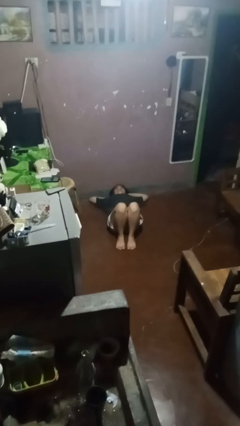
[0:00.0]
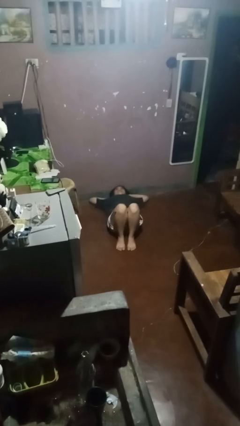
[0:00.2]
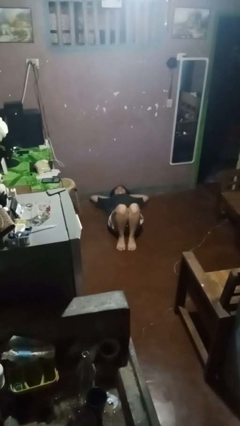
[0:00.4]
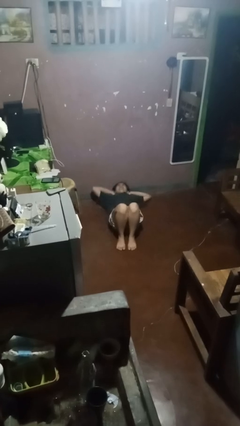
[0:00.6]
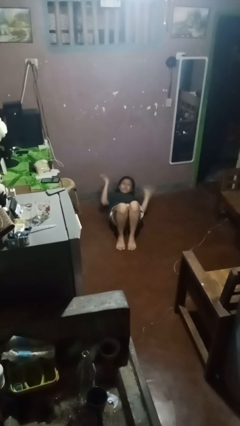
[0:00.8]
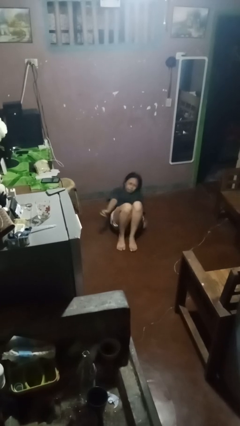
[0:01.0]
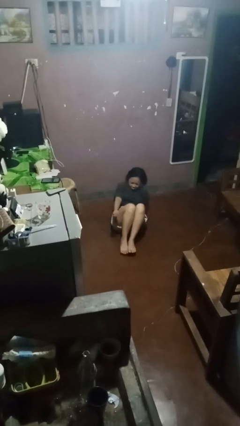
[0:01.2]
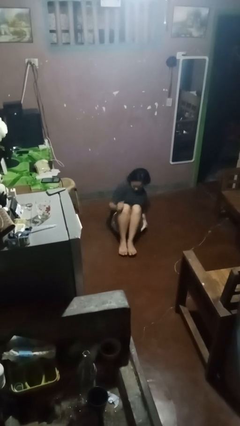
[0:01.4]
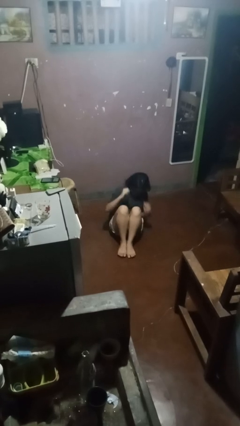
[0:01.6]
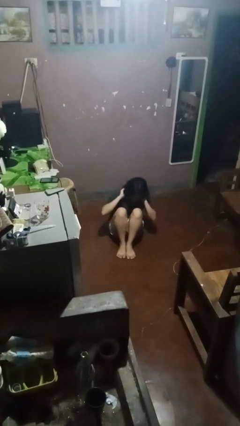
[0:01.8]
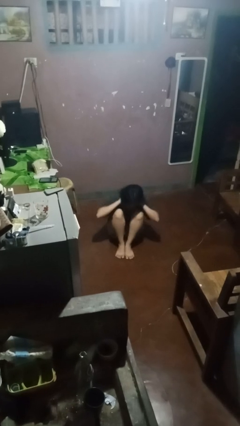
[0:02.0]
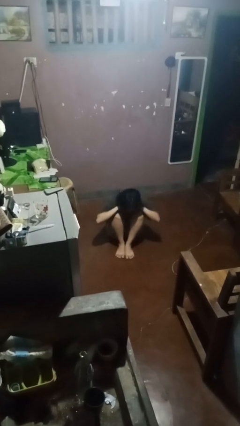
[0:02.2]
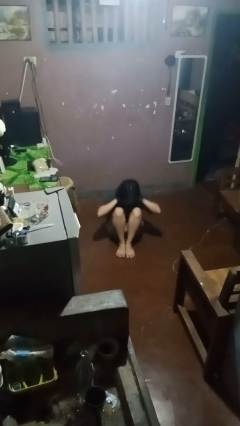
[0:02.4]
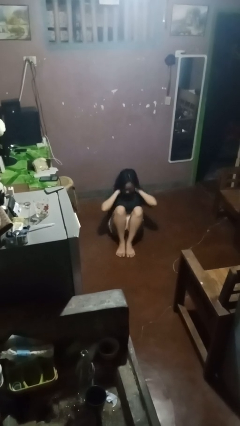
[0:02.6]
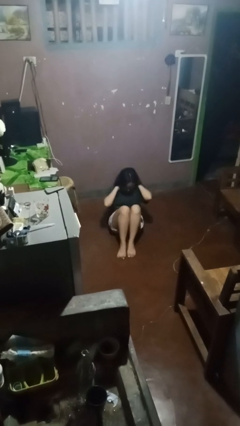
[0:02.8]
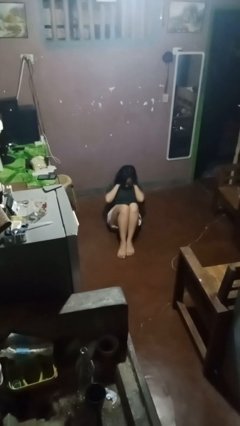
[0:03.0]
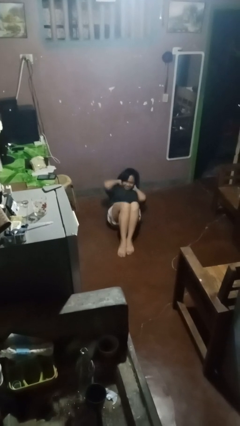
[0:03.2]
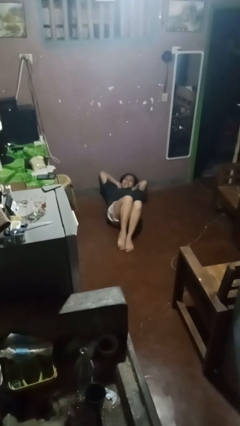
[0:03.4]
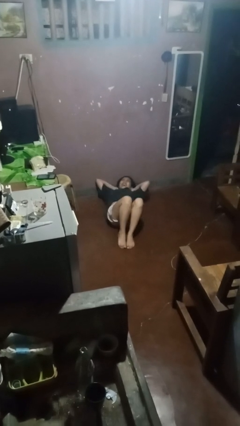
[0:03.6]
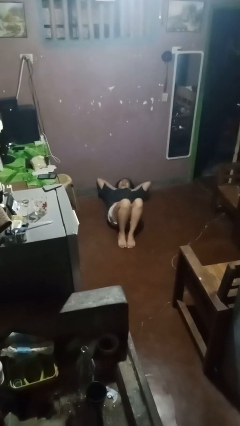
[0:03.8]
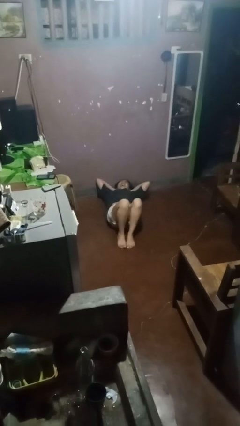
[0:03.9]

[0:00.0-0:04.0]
person exercises with situp

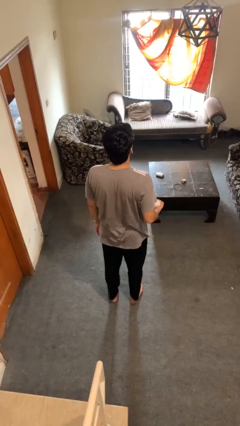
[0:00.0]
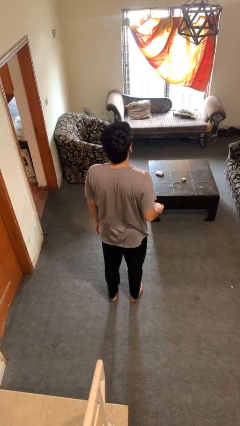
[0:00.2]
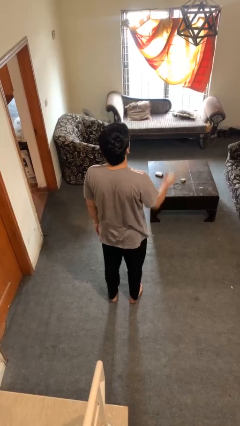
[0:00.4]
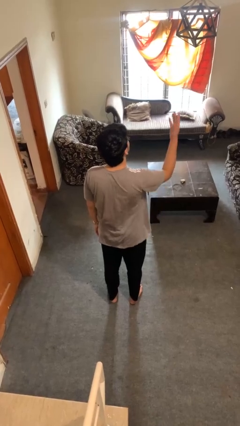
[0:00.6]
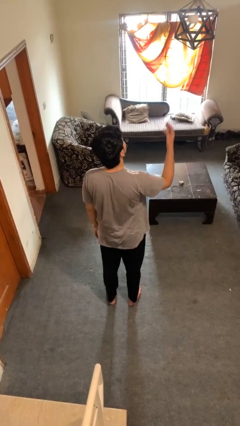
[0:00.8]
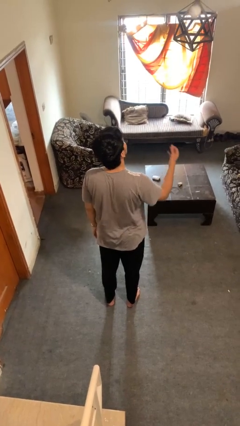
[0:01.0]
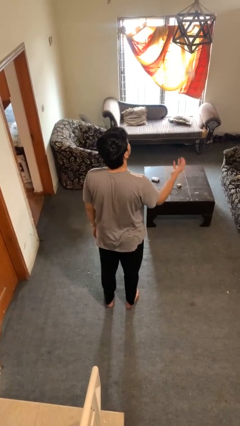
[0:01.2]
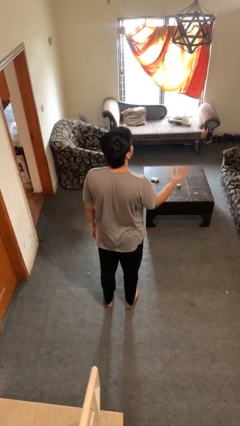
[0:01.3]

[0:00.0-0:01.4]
person drops object

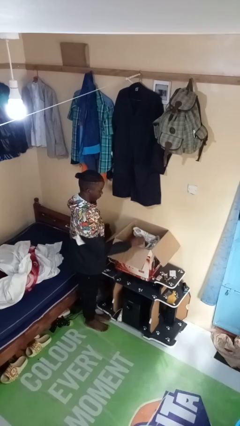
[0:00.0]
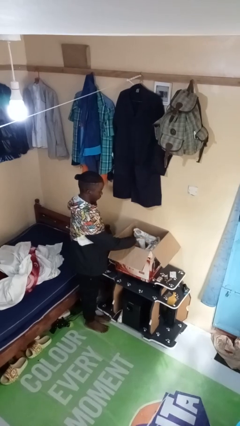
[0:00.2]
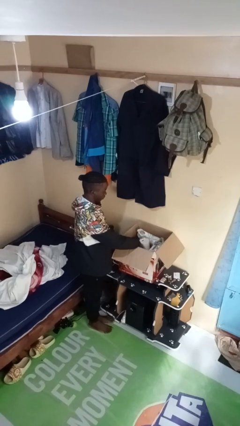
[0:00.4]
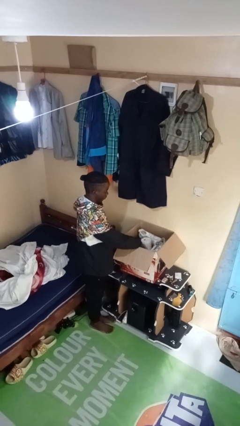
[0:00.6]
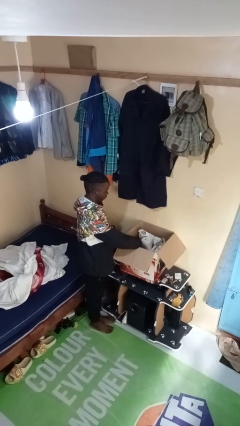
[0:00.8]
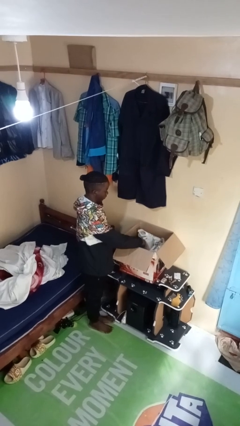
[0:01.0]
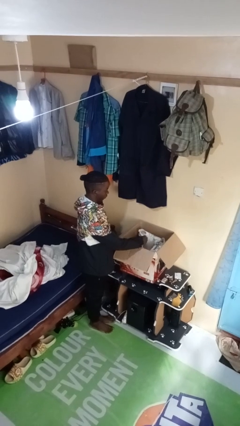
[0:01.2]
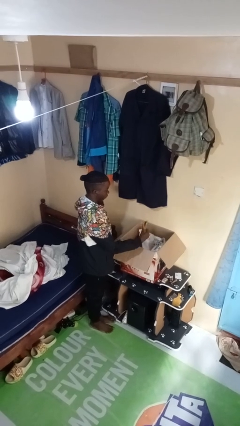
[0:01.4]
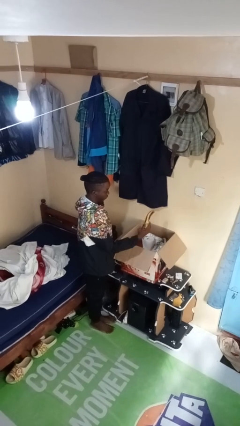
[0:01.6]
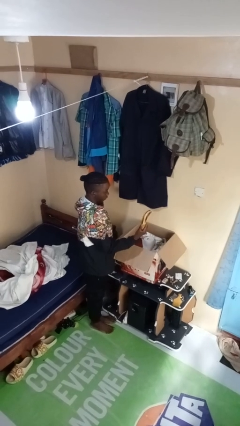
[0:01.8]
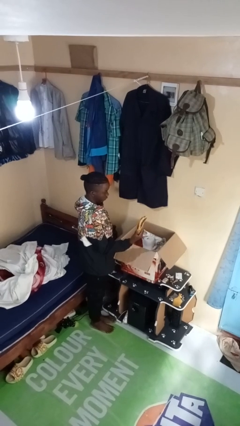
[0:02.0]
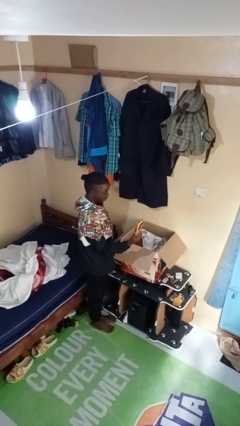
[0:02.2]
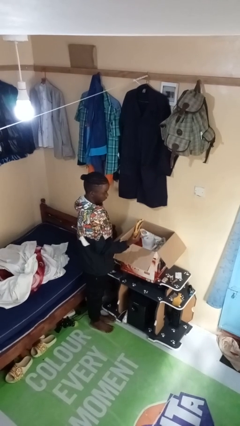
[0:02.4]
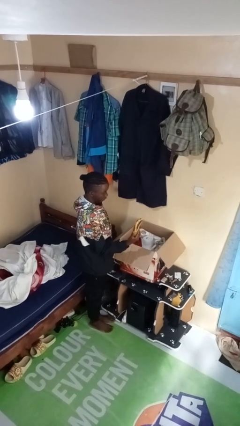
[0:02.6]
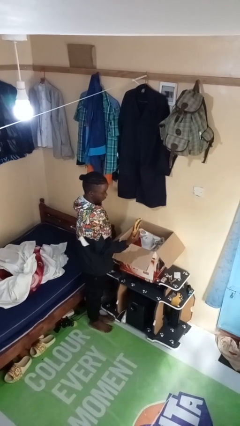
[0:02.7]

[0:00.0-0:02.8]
person takes object from box

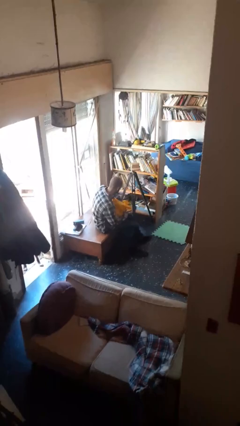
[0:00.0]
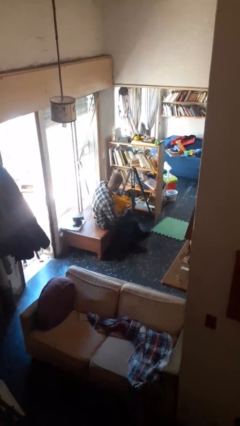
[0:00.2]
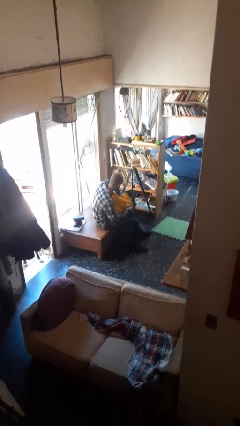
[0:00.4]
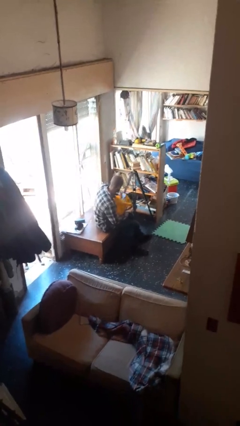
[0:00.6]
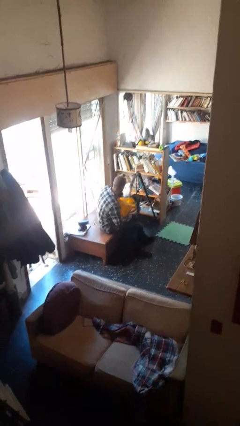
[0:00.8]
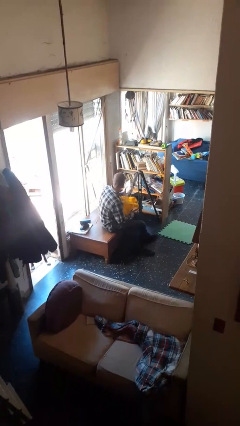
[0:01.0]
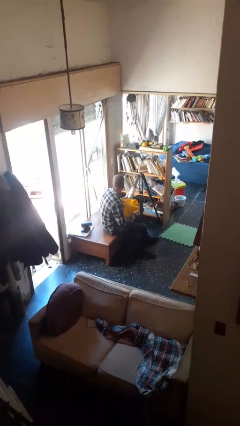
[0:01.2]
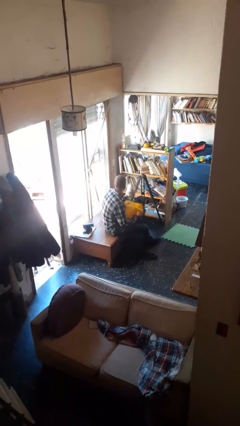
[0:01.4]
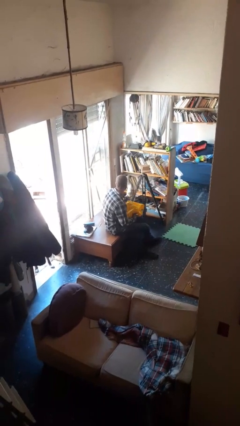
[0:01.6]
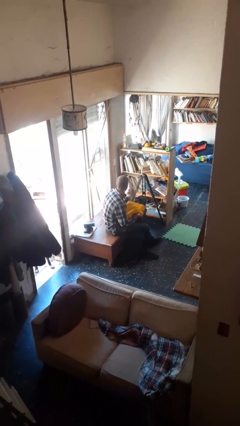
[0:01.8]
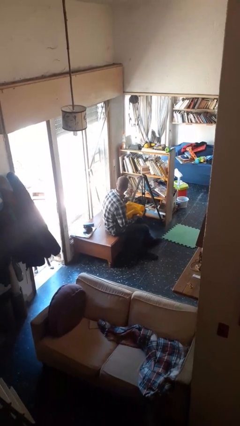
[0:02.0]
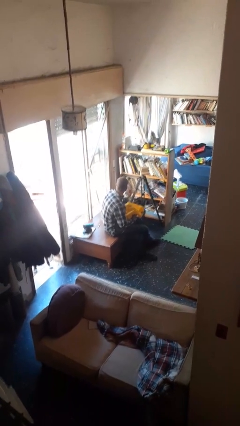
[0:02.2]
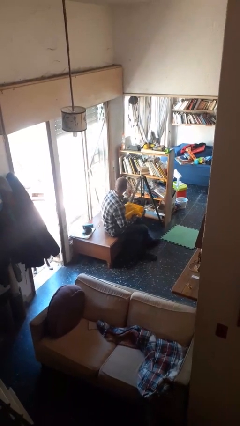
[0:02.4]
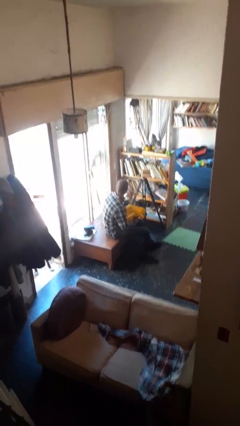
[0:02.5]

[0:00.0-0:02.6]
person takes object from bag

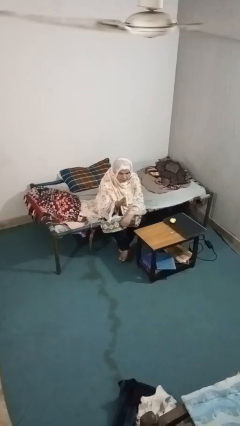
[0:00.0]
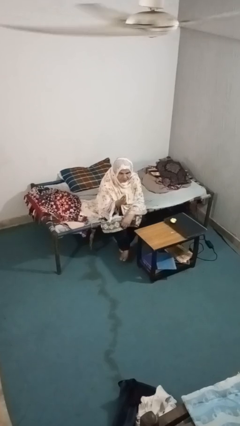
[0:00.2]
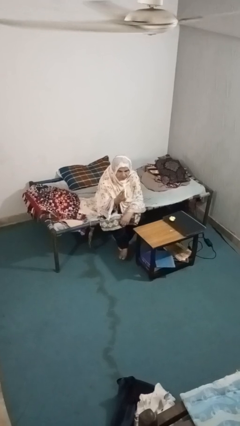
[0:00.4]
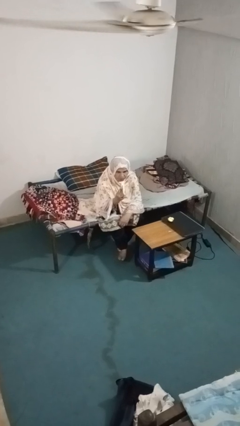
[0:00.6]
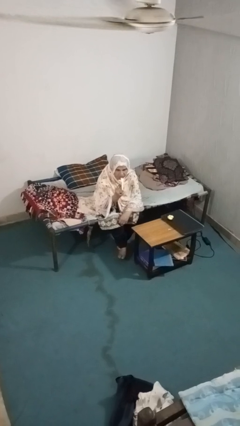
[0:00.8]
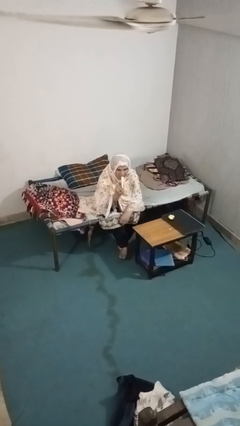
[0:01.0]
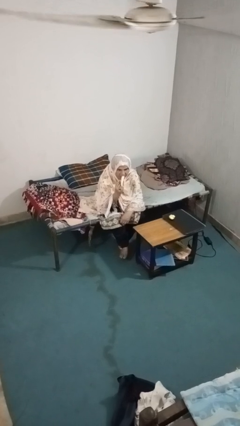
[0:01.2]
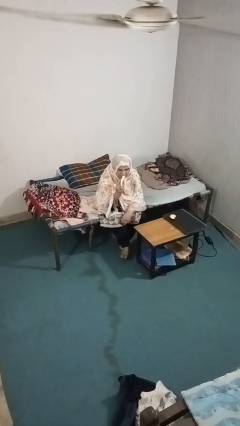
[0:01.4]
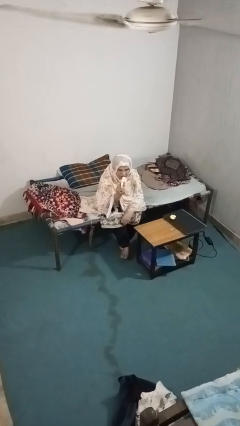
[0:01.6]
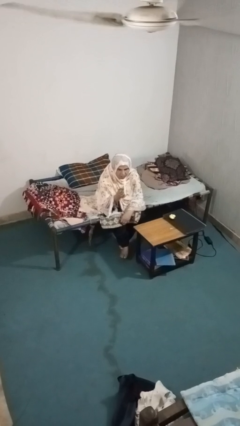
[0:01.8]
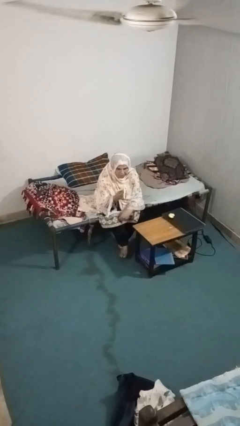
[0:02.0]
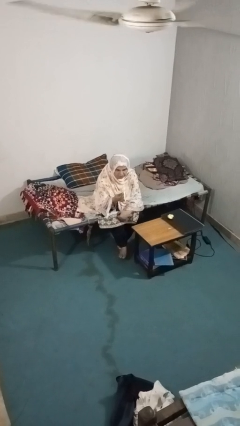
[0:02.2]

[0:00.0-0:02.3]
person eats banana

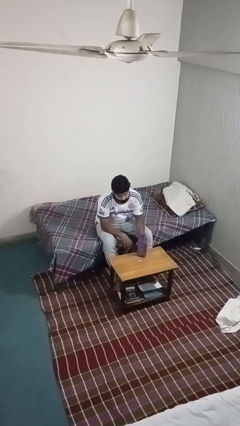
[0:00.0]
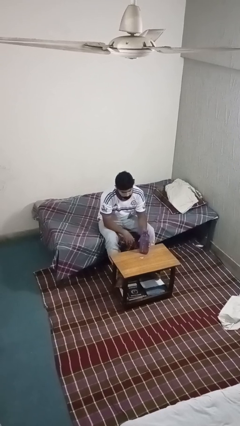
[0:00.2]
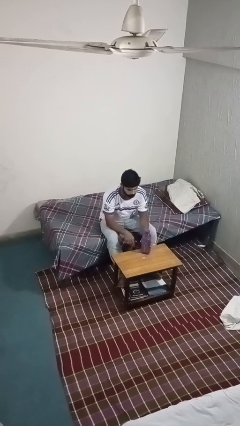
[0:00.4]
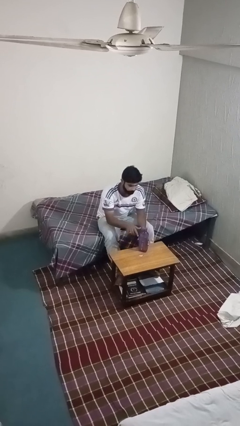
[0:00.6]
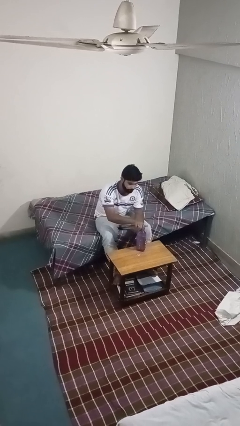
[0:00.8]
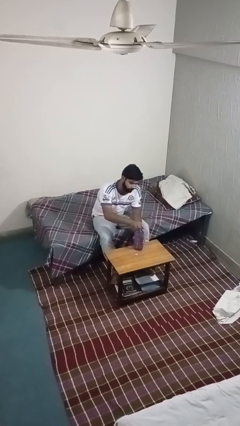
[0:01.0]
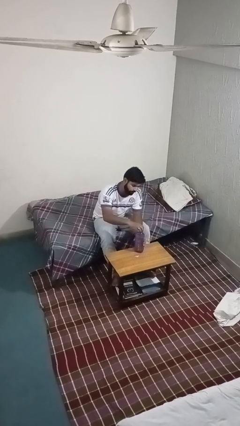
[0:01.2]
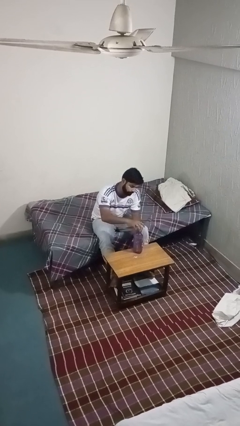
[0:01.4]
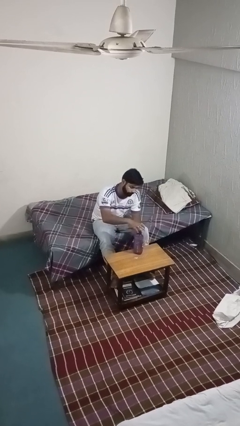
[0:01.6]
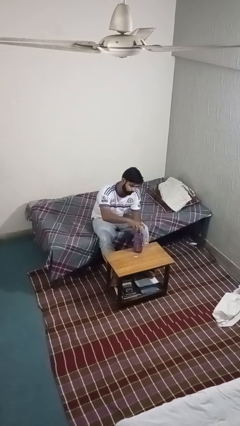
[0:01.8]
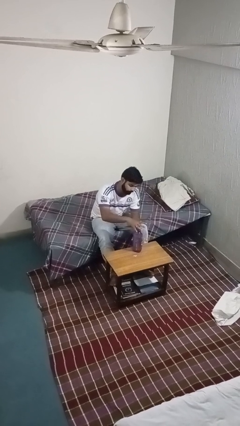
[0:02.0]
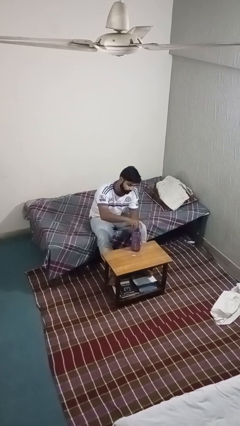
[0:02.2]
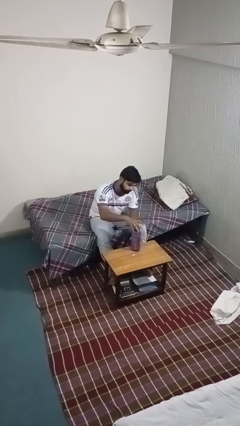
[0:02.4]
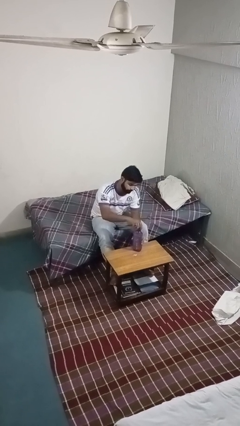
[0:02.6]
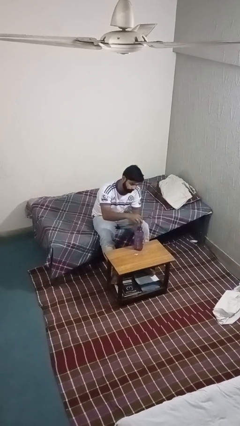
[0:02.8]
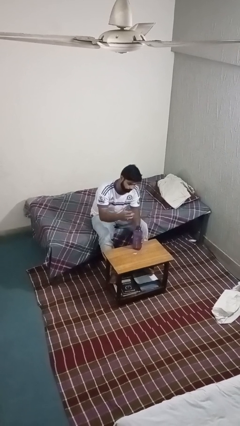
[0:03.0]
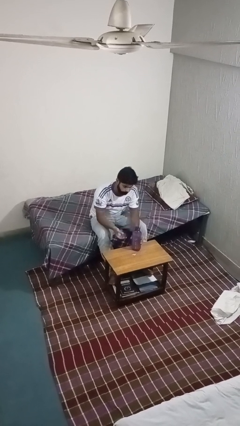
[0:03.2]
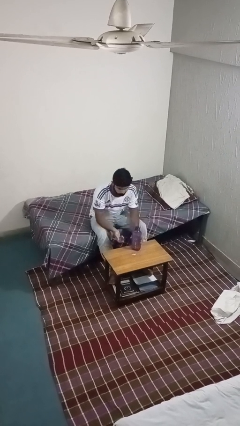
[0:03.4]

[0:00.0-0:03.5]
person unscrews lid from bottle

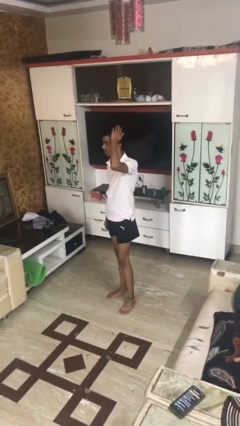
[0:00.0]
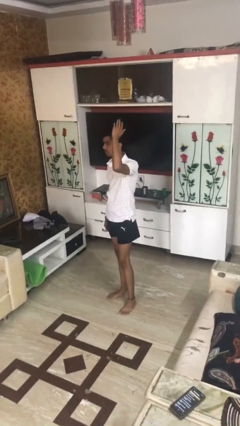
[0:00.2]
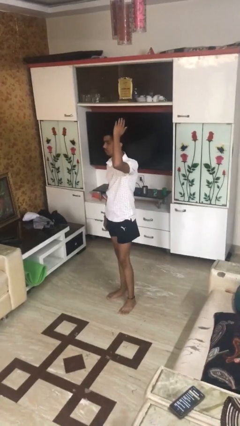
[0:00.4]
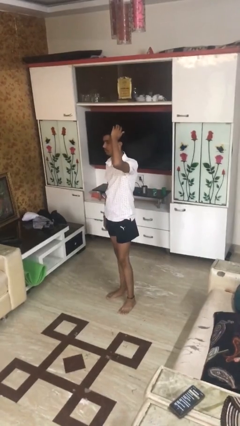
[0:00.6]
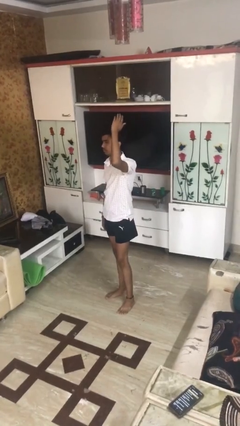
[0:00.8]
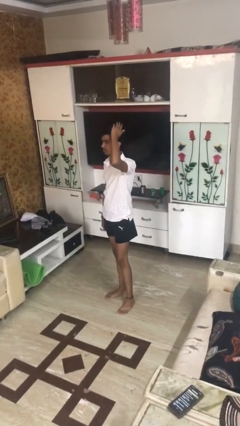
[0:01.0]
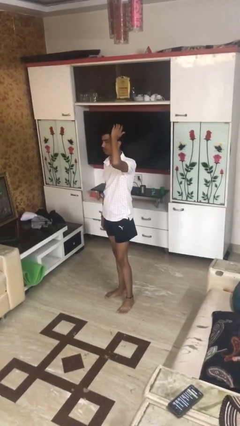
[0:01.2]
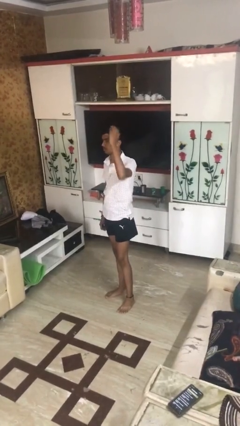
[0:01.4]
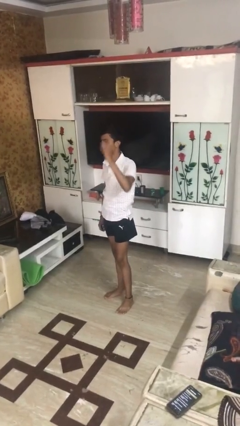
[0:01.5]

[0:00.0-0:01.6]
person pats head
